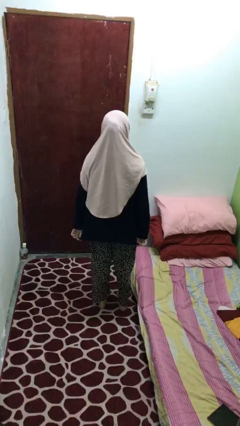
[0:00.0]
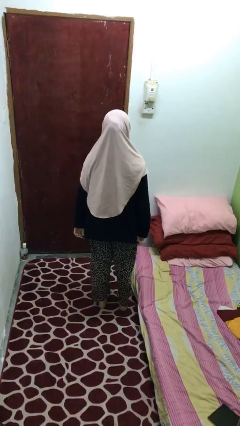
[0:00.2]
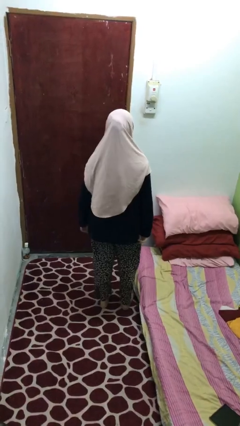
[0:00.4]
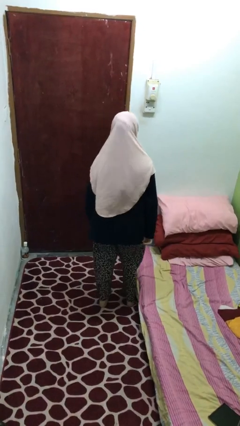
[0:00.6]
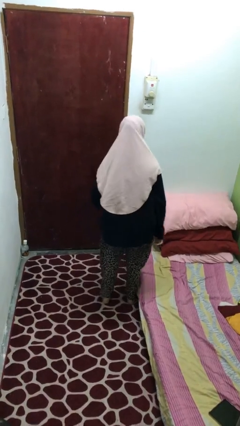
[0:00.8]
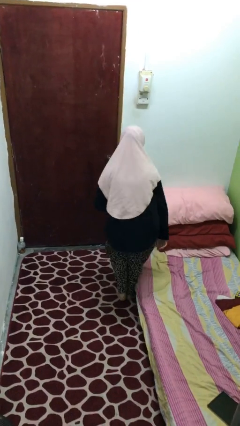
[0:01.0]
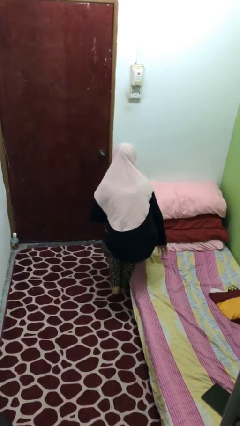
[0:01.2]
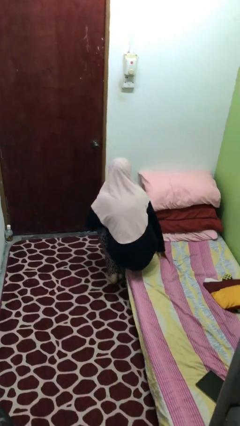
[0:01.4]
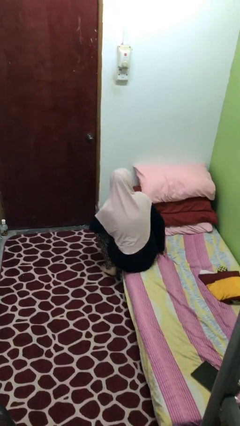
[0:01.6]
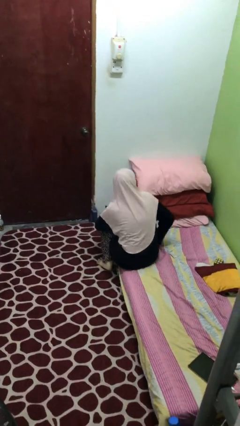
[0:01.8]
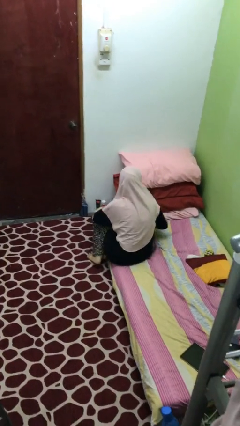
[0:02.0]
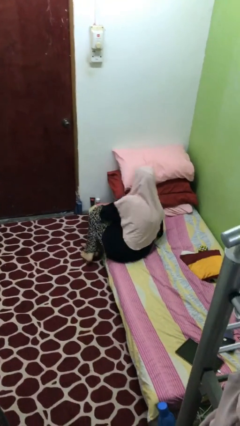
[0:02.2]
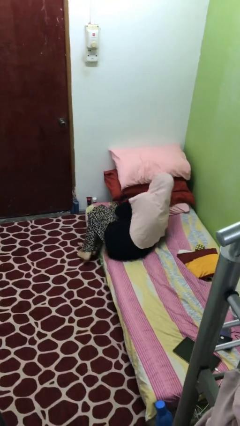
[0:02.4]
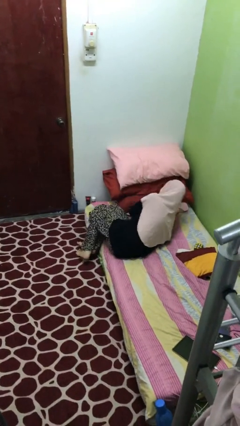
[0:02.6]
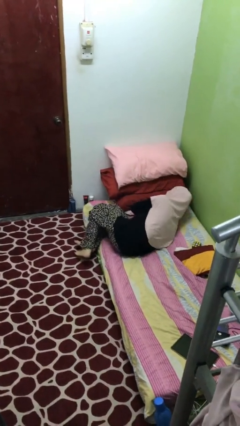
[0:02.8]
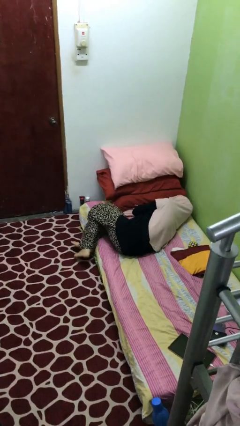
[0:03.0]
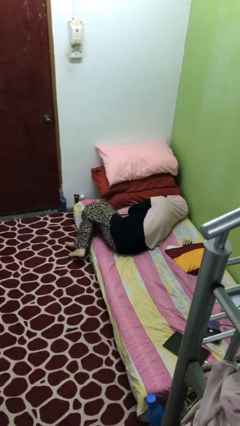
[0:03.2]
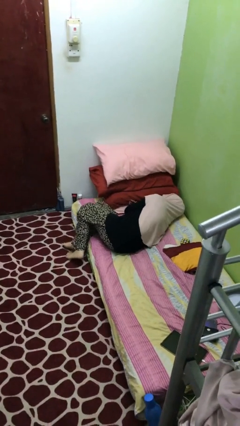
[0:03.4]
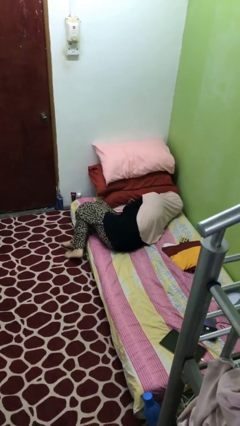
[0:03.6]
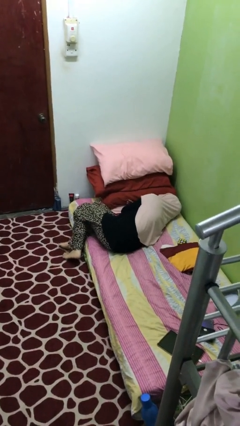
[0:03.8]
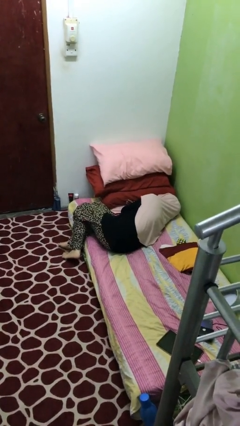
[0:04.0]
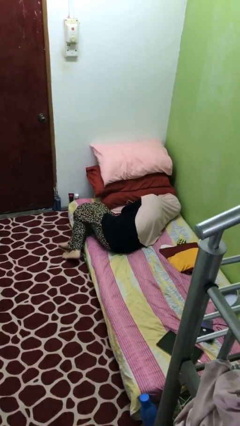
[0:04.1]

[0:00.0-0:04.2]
person lies down on bed

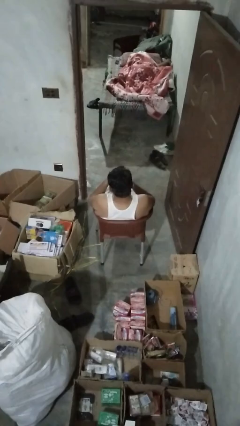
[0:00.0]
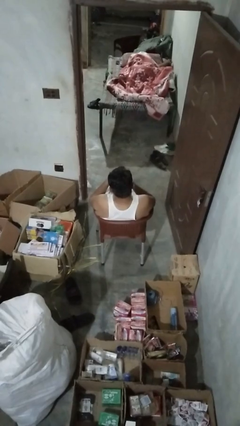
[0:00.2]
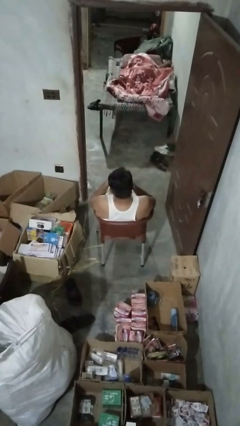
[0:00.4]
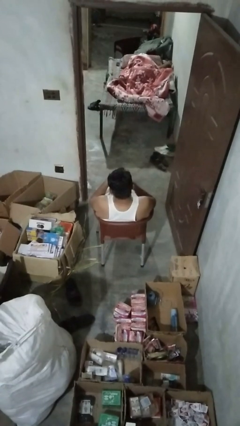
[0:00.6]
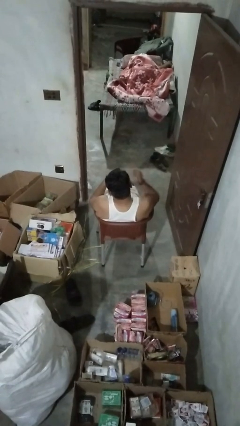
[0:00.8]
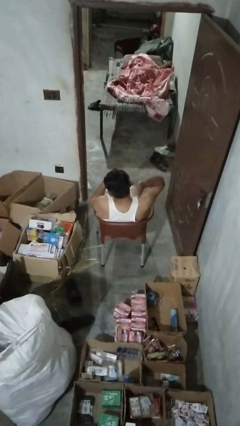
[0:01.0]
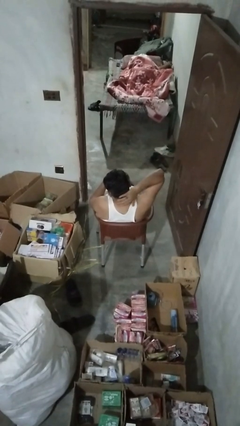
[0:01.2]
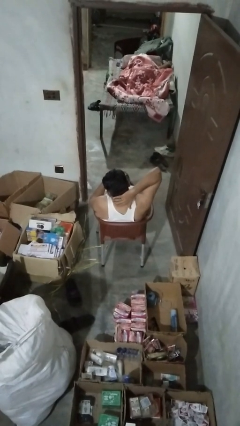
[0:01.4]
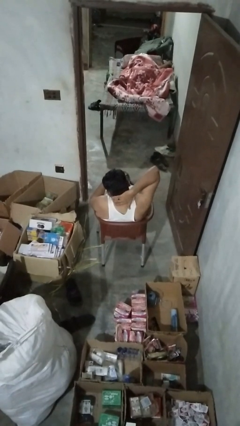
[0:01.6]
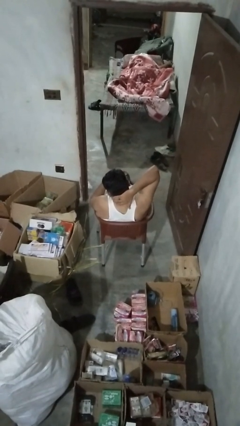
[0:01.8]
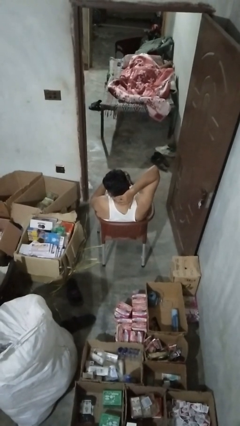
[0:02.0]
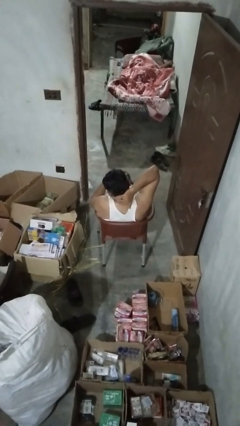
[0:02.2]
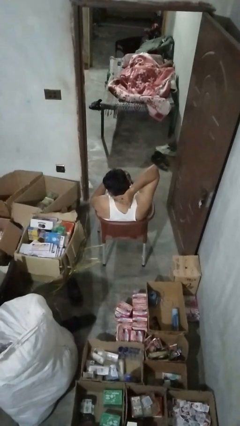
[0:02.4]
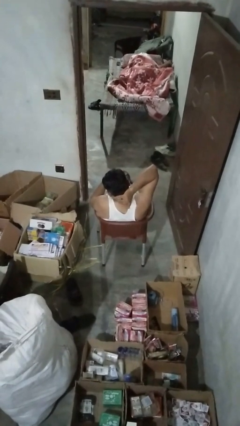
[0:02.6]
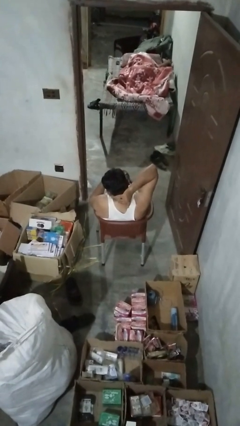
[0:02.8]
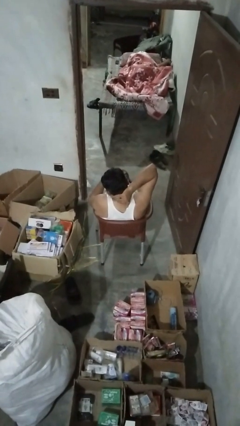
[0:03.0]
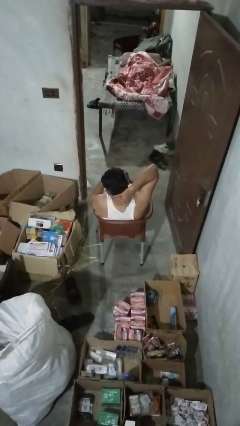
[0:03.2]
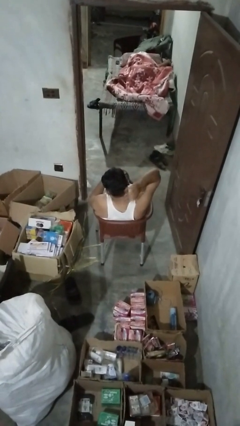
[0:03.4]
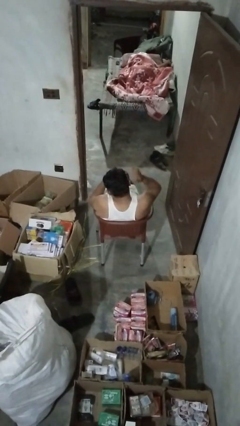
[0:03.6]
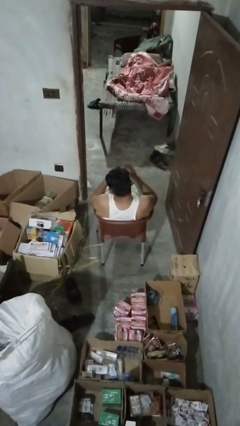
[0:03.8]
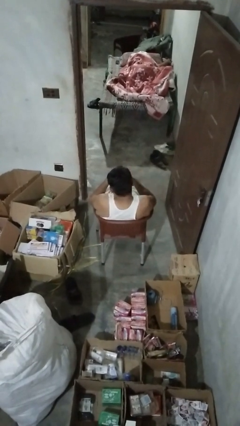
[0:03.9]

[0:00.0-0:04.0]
person rubs neck

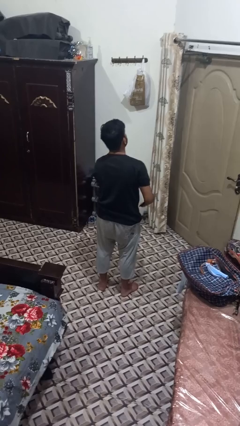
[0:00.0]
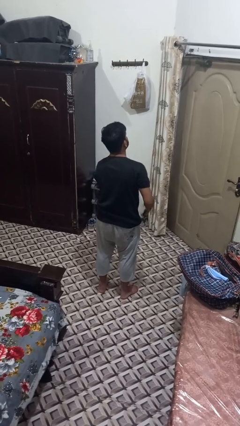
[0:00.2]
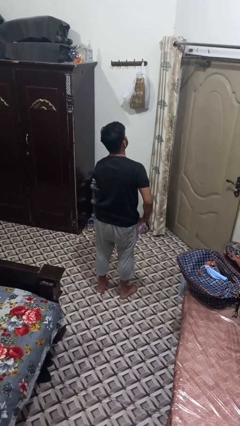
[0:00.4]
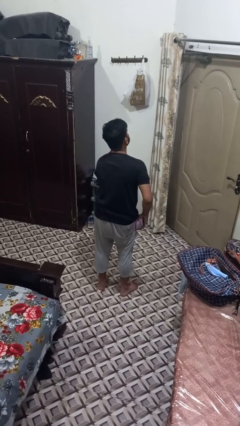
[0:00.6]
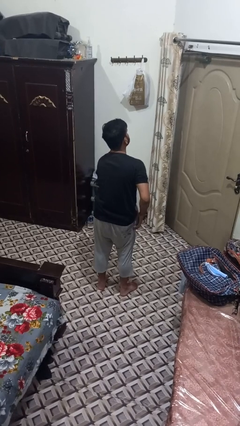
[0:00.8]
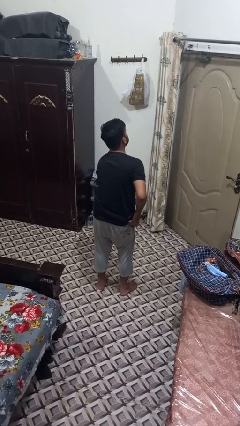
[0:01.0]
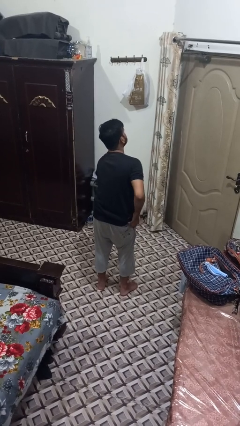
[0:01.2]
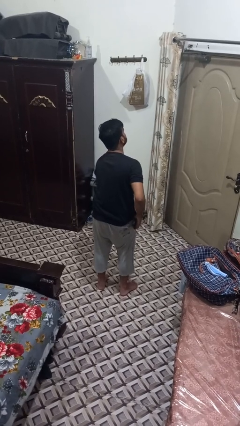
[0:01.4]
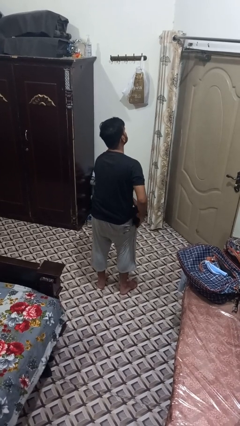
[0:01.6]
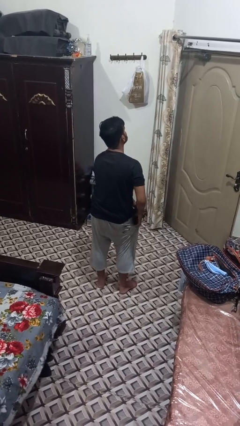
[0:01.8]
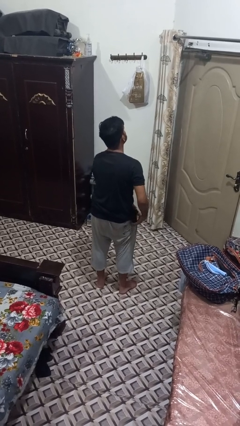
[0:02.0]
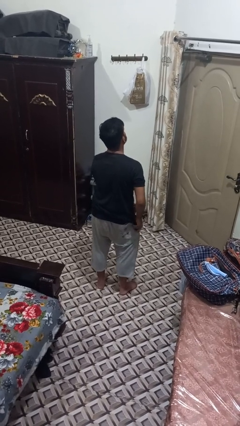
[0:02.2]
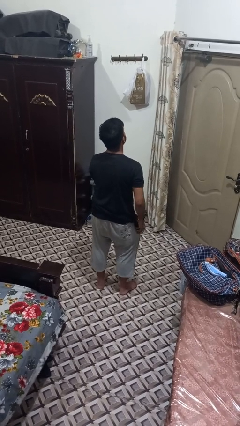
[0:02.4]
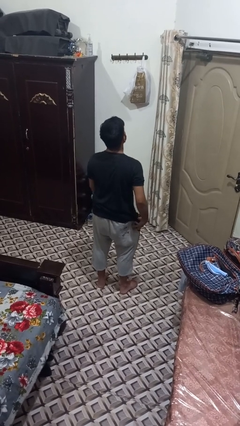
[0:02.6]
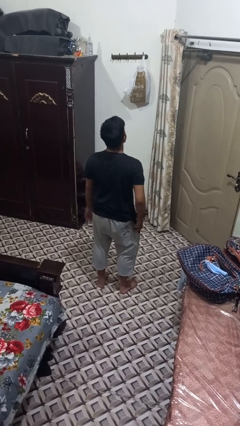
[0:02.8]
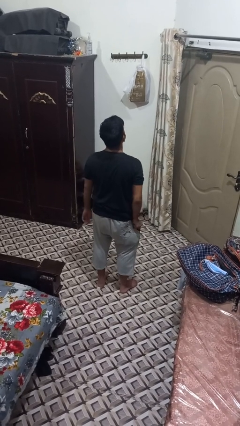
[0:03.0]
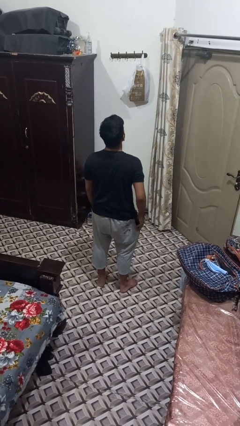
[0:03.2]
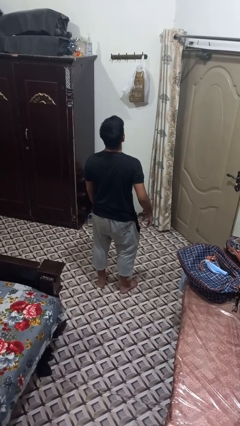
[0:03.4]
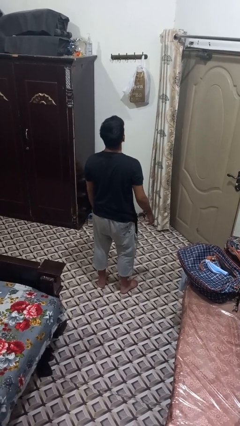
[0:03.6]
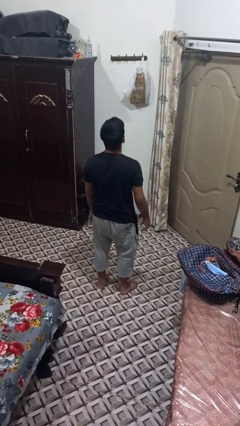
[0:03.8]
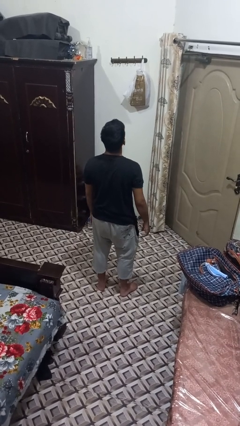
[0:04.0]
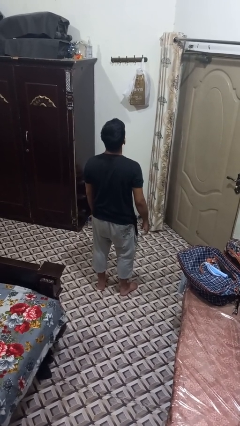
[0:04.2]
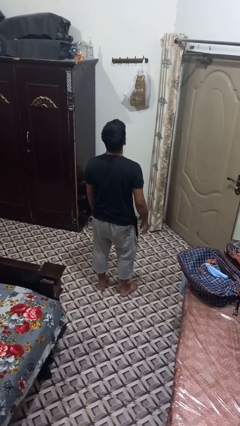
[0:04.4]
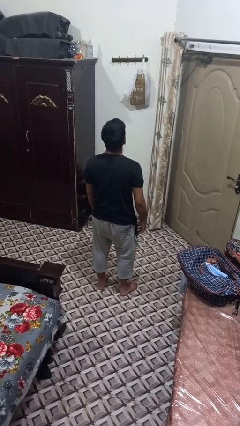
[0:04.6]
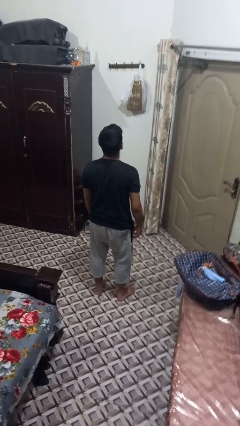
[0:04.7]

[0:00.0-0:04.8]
person puts phone into pocket

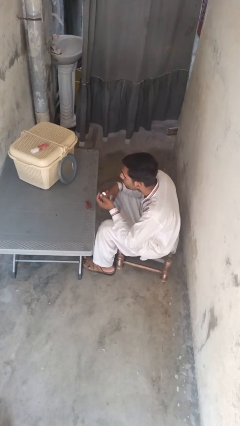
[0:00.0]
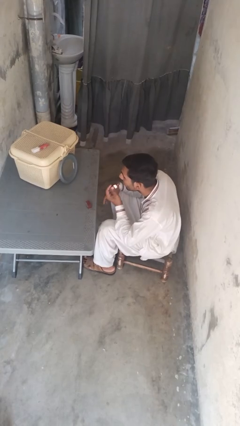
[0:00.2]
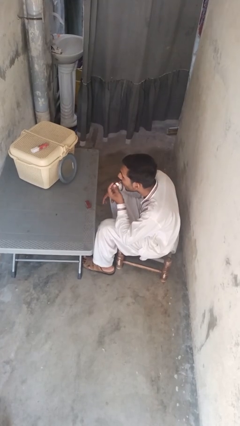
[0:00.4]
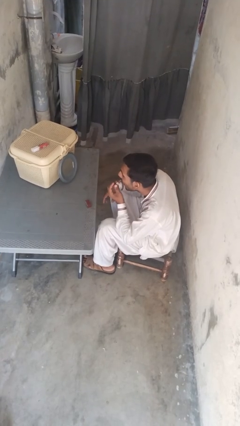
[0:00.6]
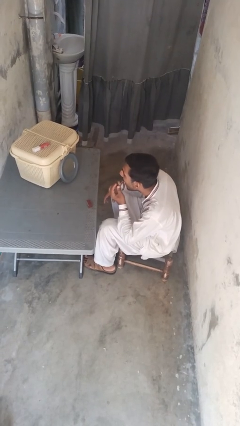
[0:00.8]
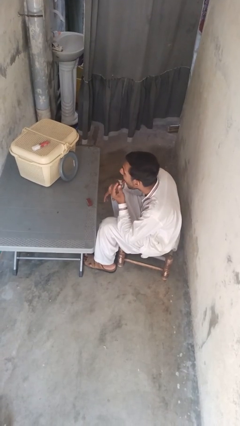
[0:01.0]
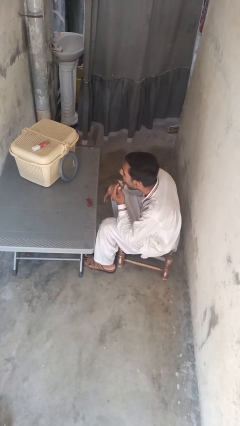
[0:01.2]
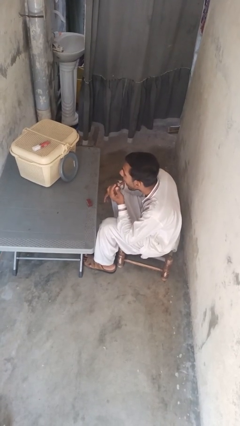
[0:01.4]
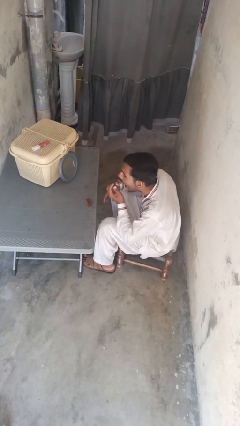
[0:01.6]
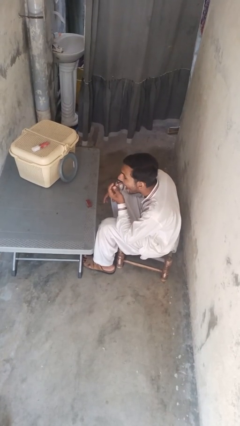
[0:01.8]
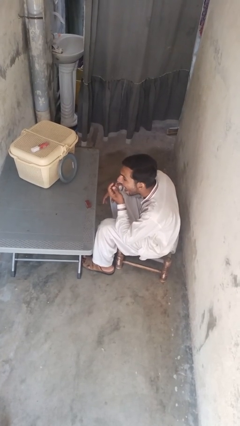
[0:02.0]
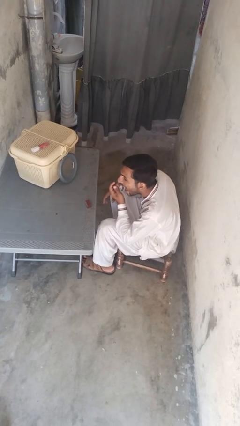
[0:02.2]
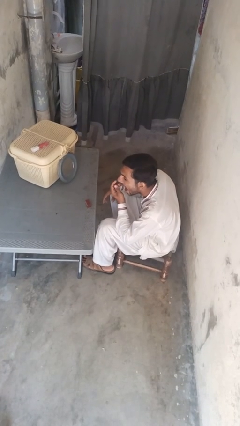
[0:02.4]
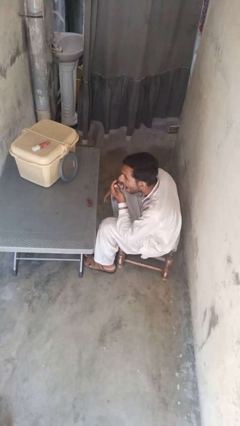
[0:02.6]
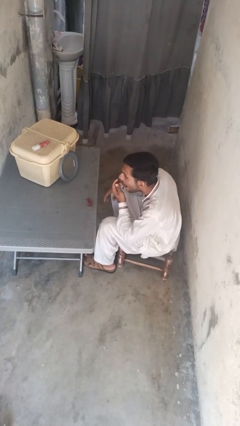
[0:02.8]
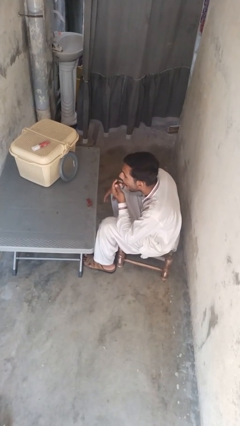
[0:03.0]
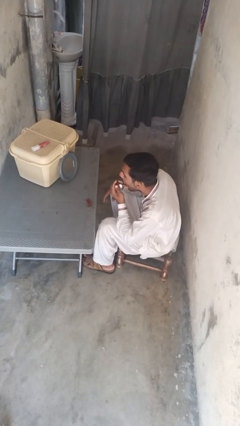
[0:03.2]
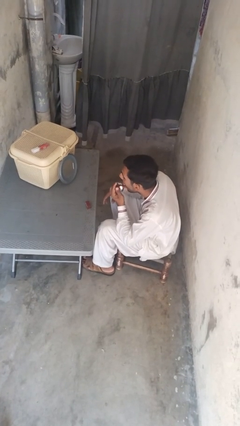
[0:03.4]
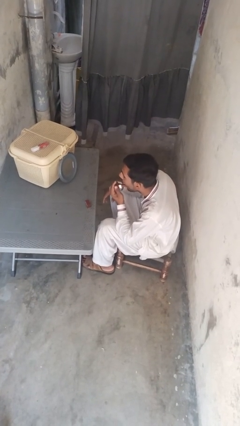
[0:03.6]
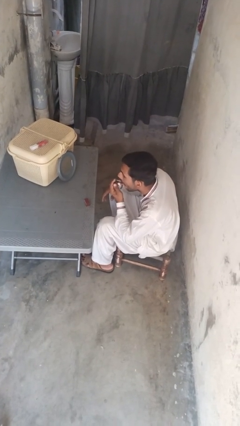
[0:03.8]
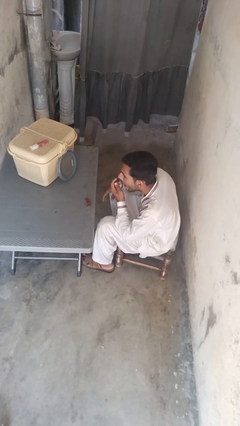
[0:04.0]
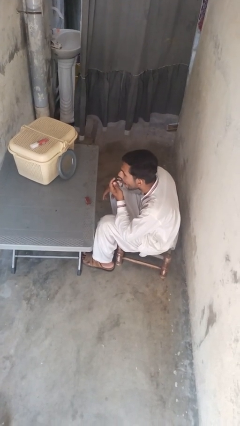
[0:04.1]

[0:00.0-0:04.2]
person applies lip makeup

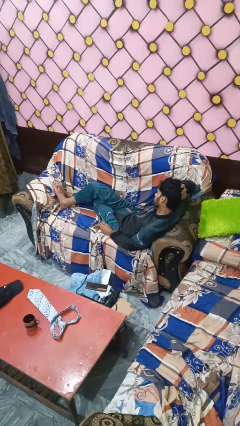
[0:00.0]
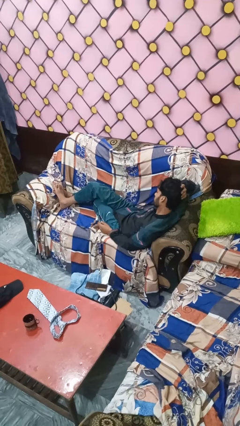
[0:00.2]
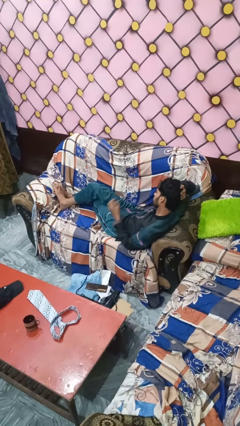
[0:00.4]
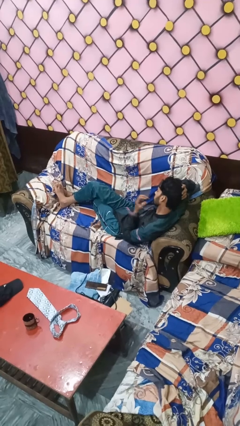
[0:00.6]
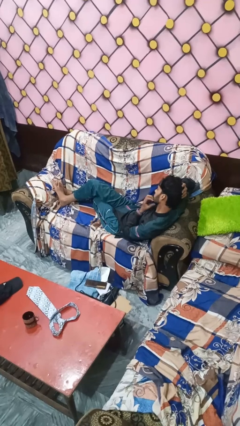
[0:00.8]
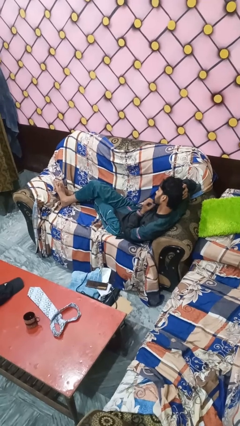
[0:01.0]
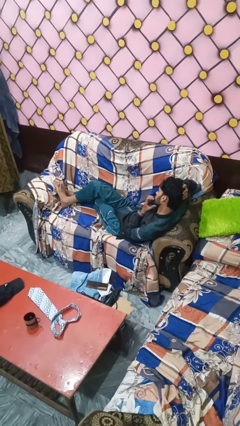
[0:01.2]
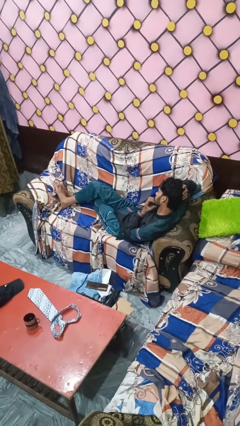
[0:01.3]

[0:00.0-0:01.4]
person strokes chin
